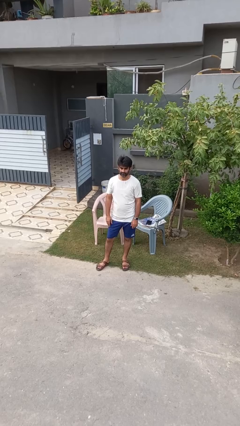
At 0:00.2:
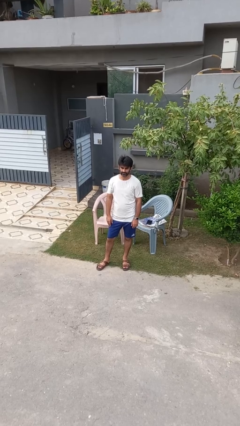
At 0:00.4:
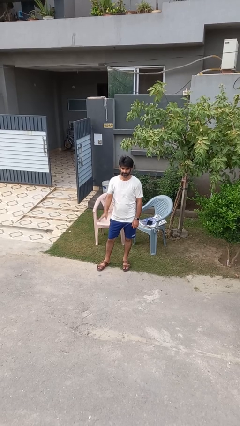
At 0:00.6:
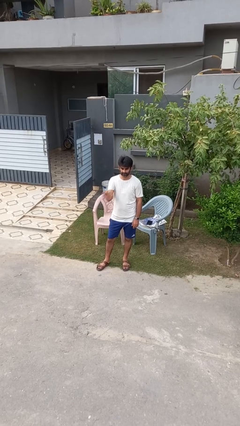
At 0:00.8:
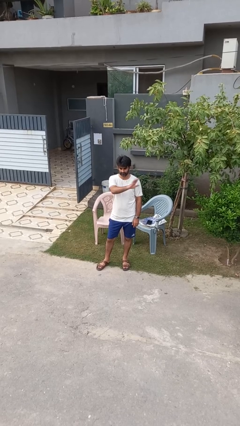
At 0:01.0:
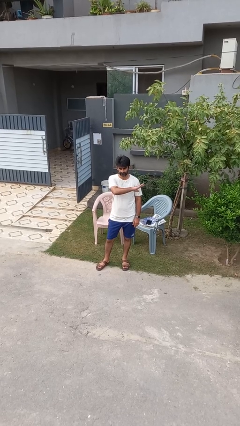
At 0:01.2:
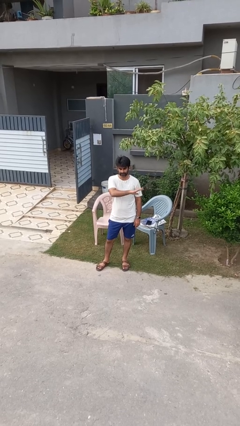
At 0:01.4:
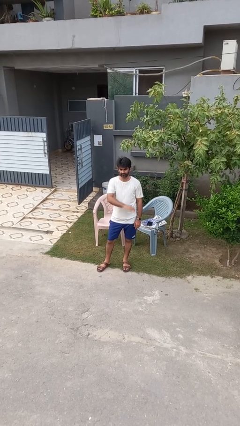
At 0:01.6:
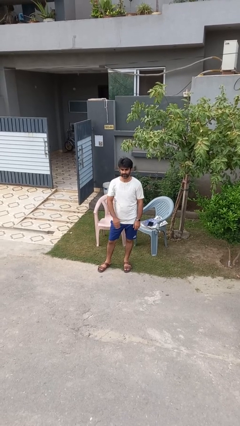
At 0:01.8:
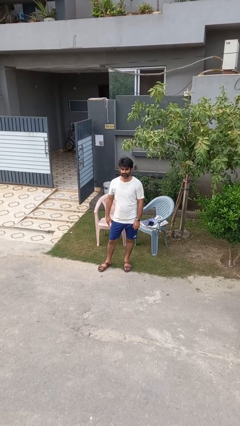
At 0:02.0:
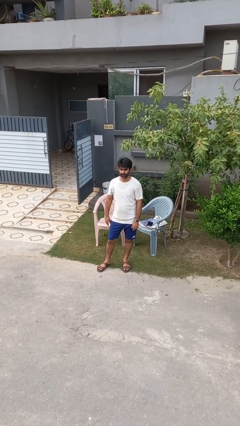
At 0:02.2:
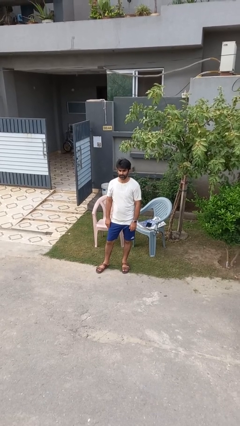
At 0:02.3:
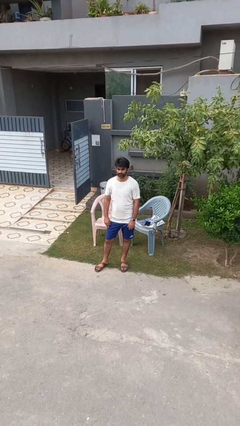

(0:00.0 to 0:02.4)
person gestures swipe left

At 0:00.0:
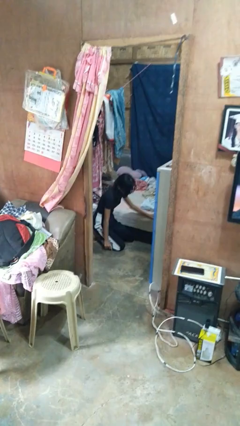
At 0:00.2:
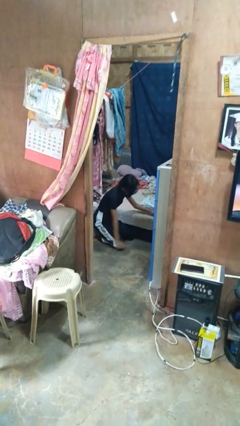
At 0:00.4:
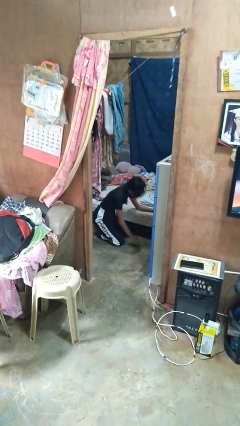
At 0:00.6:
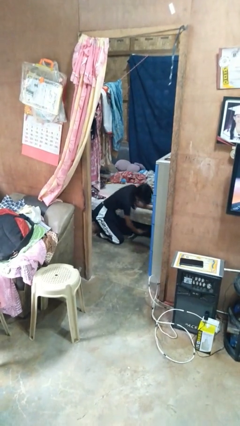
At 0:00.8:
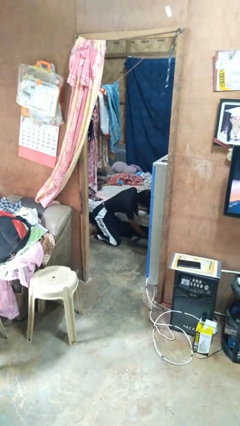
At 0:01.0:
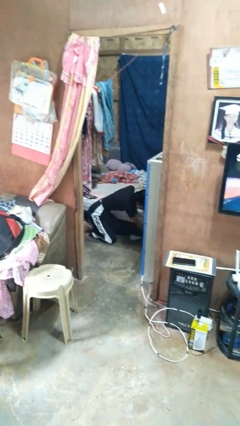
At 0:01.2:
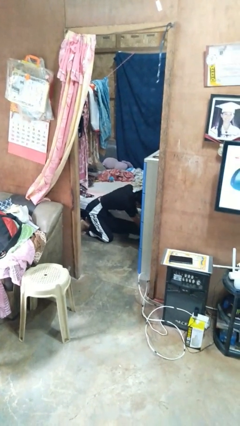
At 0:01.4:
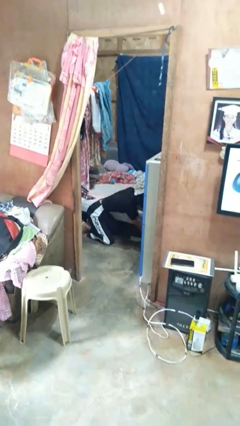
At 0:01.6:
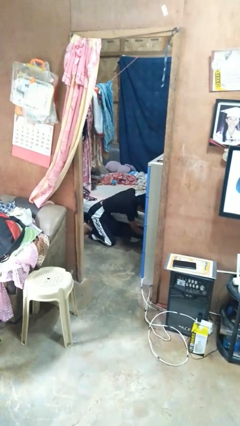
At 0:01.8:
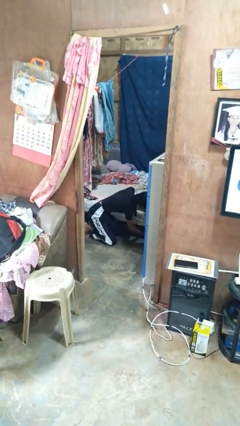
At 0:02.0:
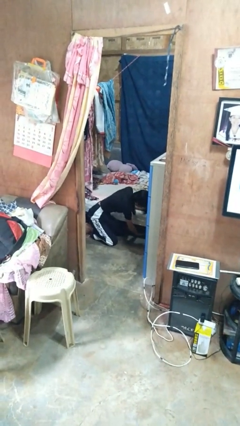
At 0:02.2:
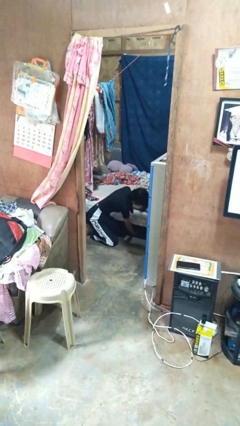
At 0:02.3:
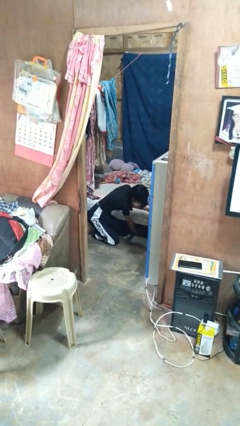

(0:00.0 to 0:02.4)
person searches under bed

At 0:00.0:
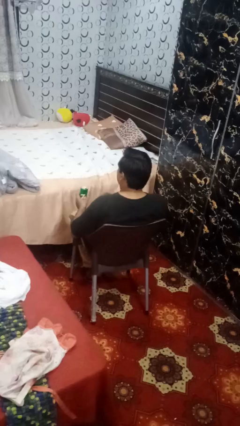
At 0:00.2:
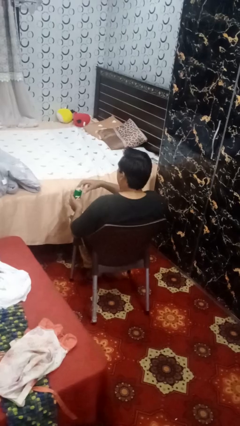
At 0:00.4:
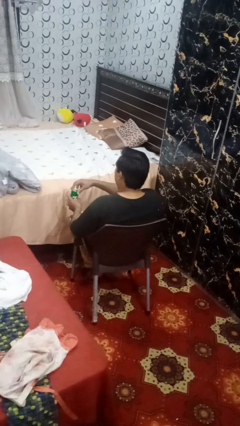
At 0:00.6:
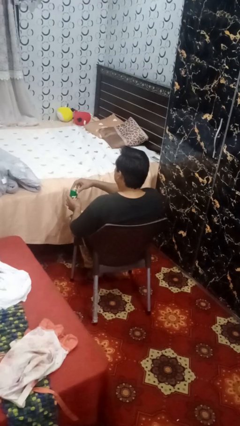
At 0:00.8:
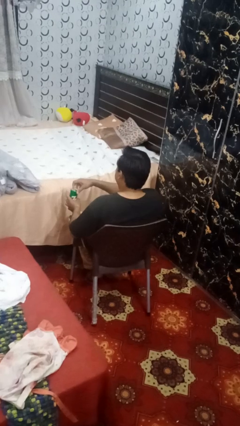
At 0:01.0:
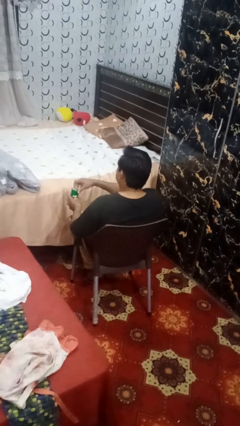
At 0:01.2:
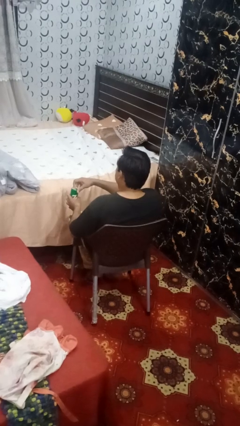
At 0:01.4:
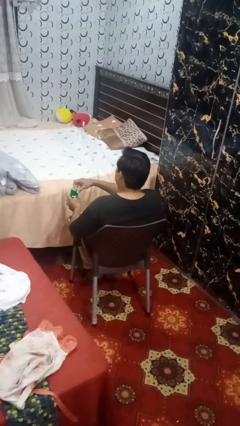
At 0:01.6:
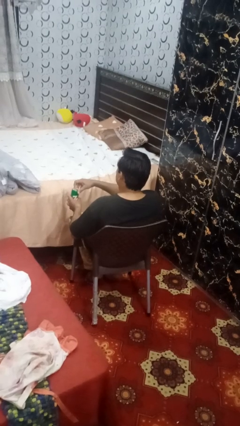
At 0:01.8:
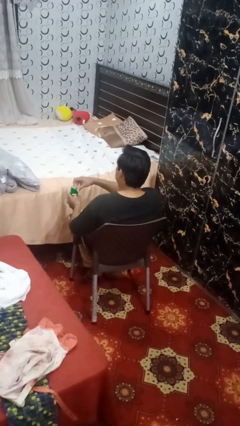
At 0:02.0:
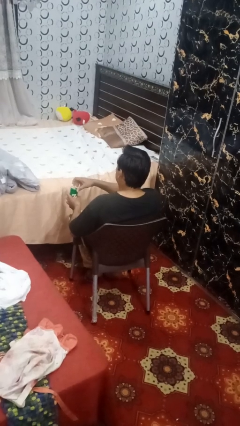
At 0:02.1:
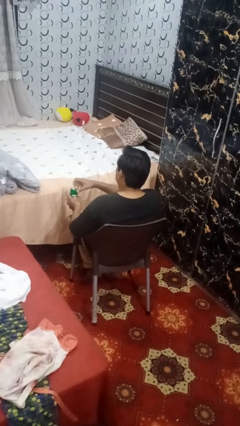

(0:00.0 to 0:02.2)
person opens beverage can

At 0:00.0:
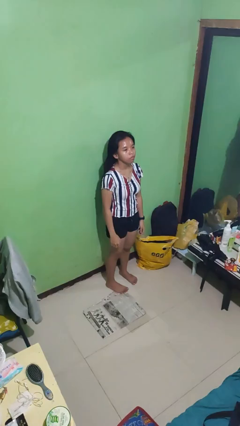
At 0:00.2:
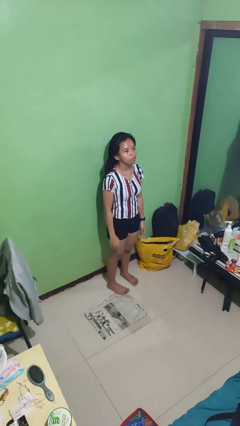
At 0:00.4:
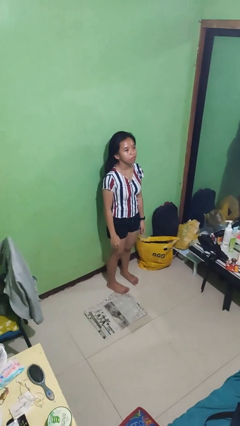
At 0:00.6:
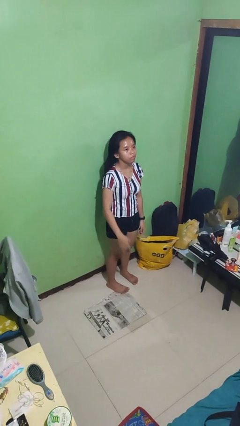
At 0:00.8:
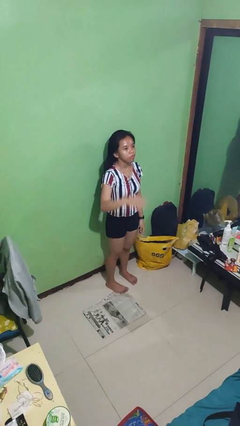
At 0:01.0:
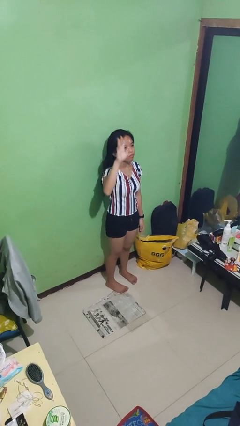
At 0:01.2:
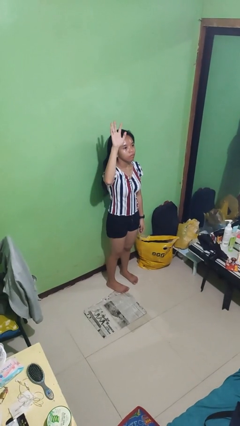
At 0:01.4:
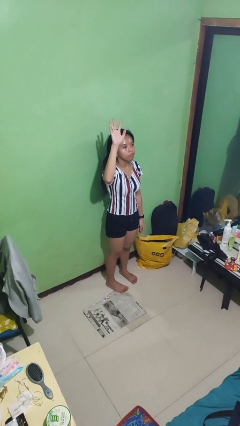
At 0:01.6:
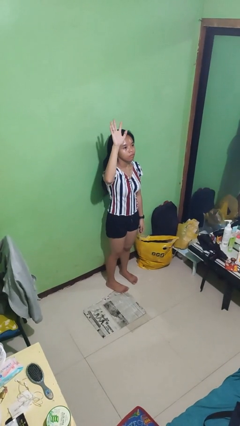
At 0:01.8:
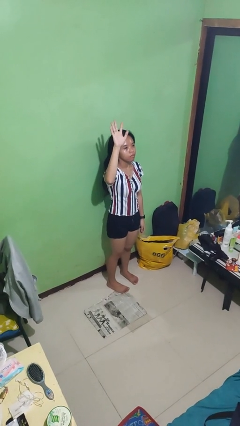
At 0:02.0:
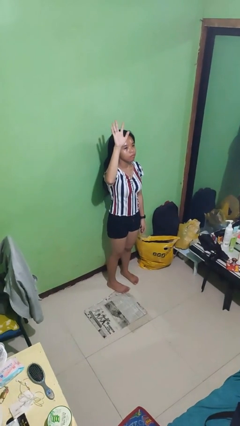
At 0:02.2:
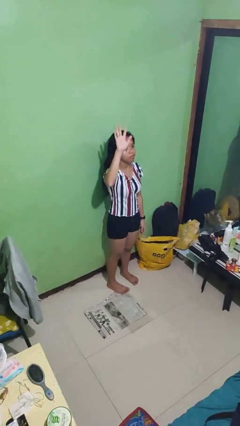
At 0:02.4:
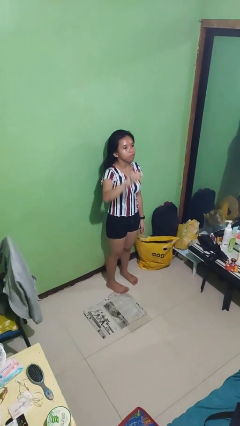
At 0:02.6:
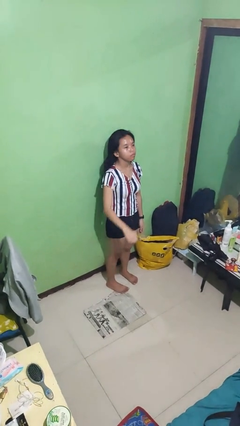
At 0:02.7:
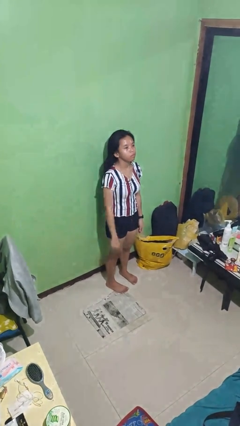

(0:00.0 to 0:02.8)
person gestures number five

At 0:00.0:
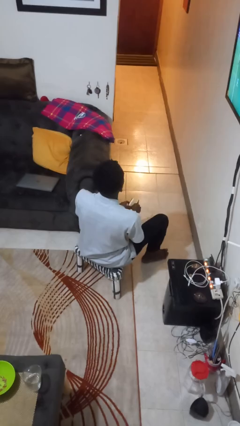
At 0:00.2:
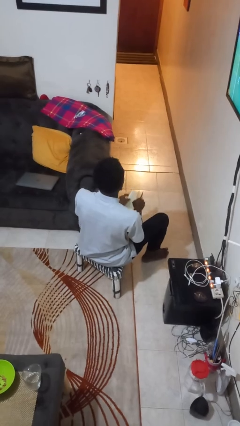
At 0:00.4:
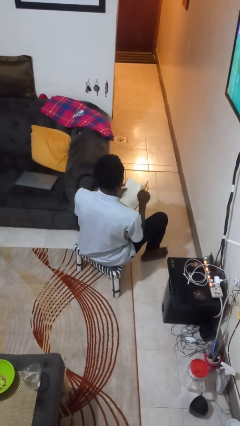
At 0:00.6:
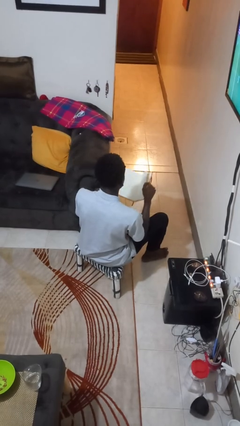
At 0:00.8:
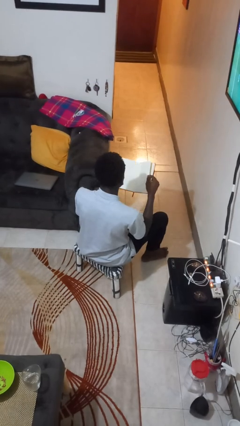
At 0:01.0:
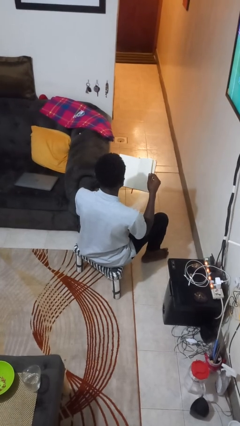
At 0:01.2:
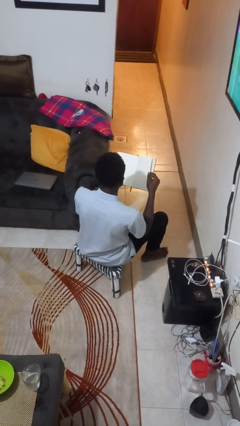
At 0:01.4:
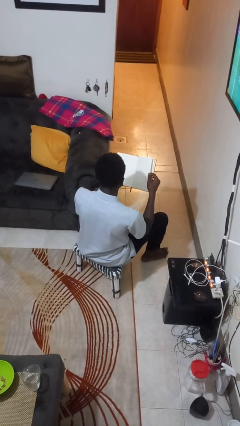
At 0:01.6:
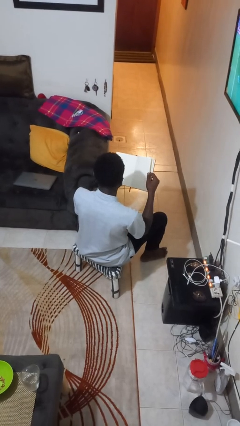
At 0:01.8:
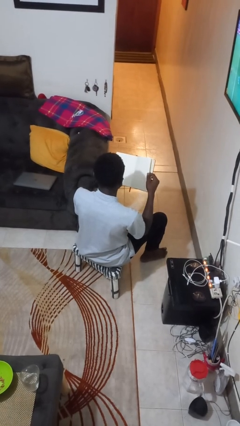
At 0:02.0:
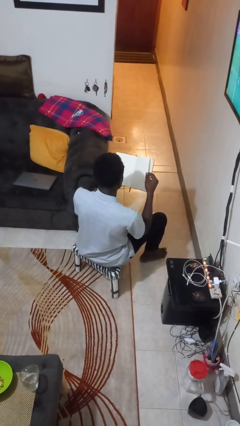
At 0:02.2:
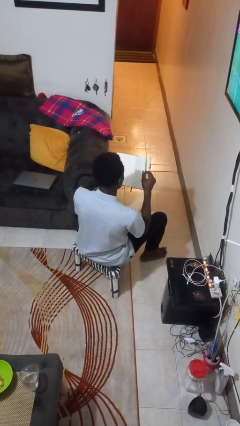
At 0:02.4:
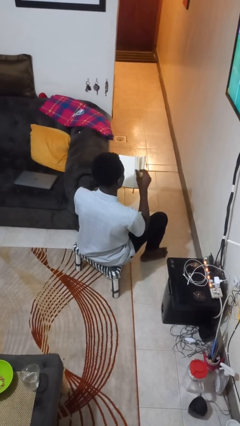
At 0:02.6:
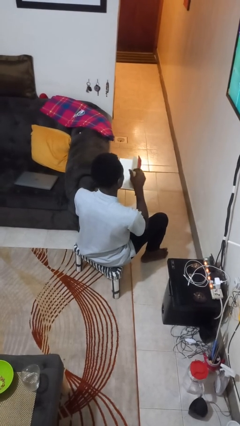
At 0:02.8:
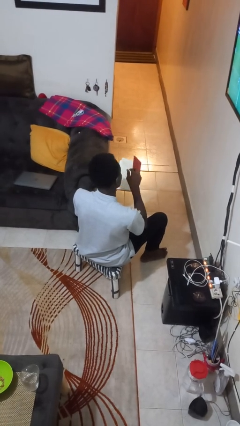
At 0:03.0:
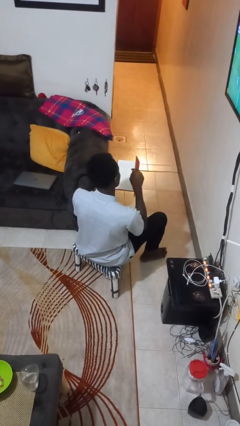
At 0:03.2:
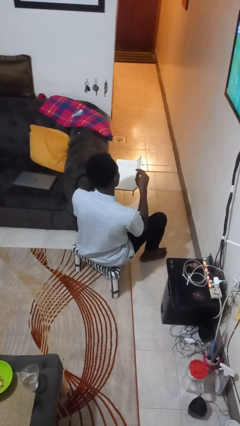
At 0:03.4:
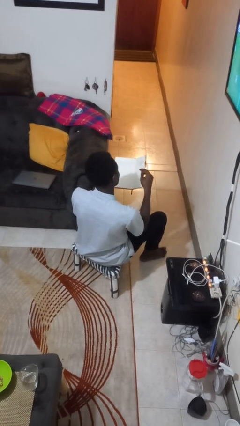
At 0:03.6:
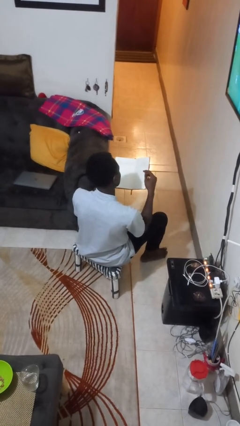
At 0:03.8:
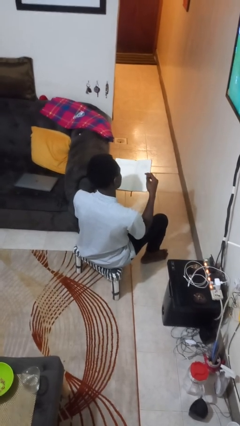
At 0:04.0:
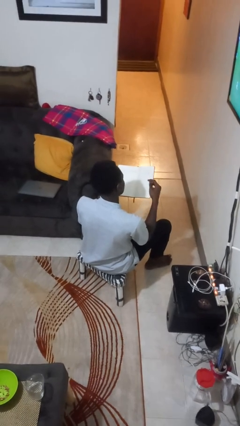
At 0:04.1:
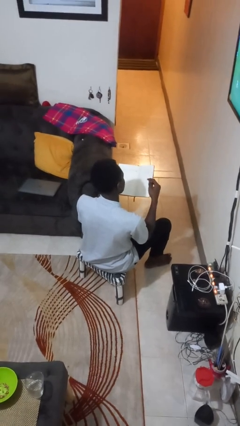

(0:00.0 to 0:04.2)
person reads book

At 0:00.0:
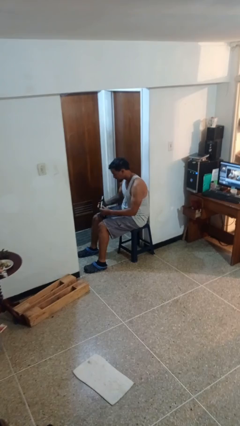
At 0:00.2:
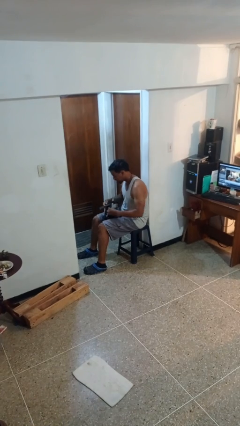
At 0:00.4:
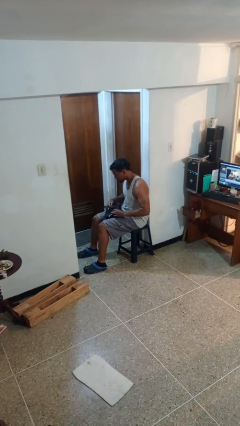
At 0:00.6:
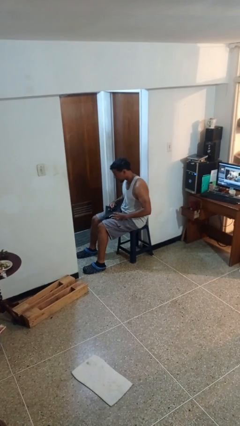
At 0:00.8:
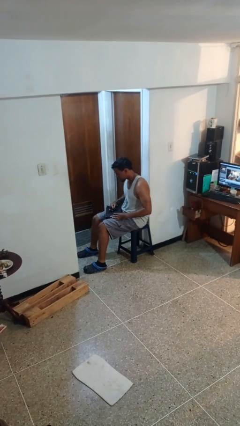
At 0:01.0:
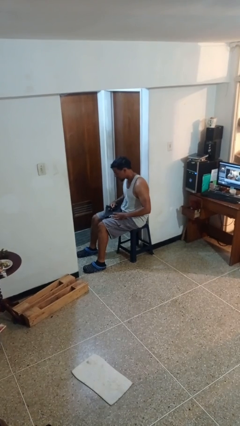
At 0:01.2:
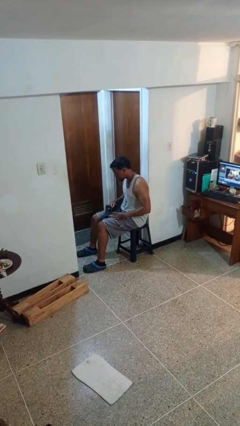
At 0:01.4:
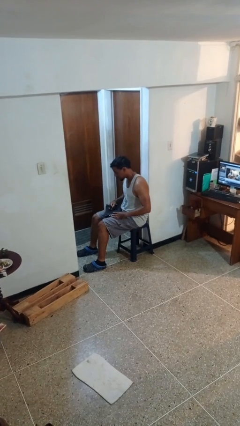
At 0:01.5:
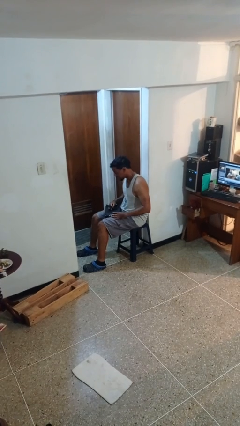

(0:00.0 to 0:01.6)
person closes laptop

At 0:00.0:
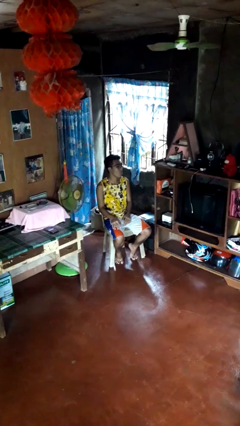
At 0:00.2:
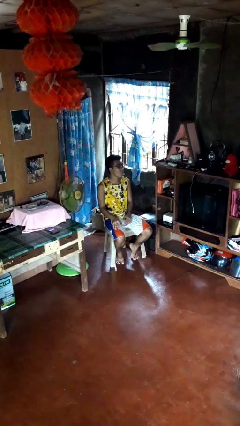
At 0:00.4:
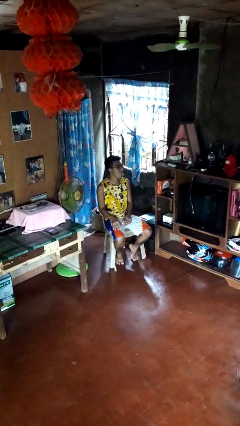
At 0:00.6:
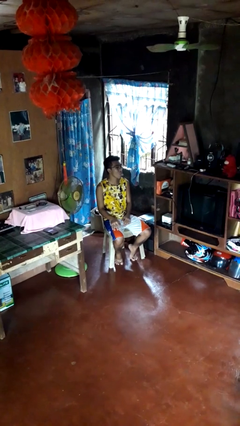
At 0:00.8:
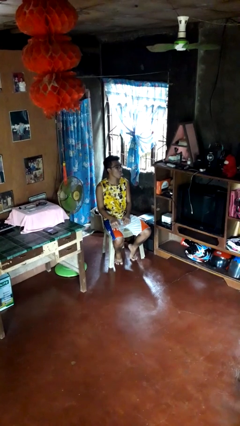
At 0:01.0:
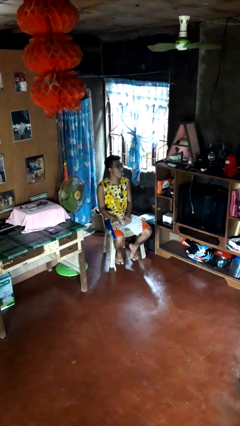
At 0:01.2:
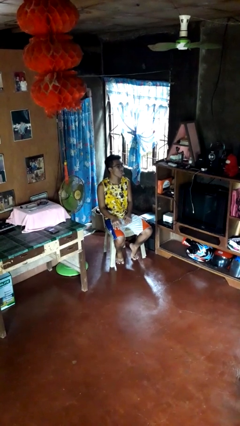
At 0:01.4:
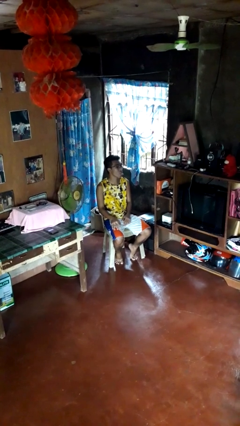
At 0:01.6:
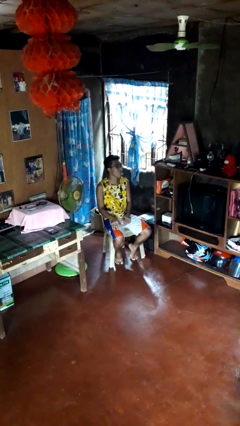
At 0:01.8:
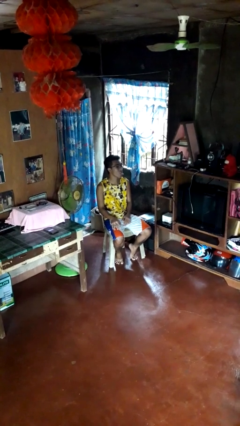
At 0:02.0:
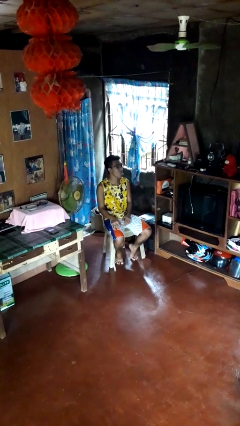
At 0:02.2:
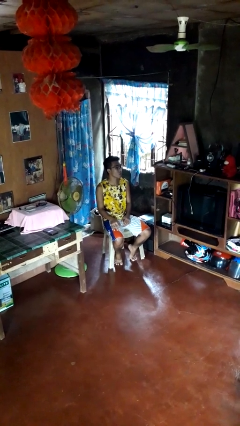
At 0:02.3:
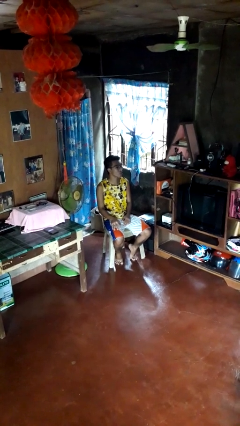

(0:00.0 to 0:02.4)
person sticks out tongue
